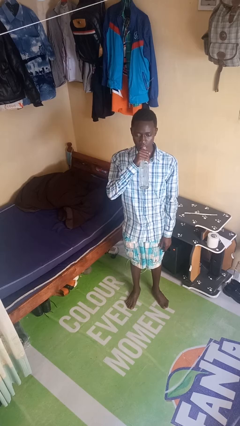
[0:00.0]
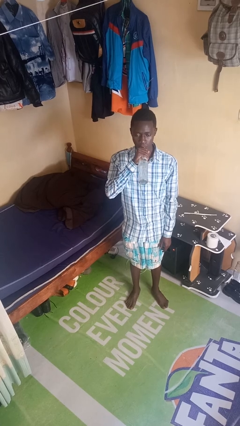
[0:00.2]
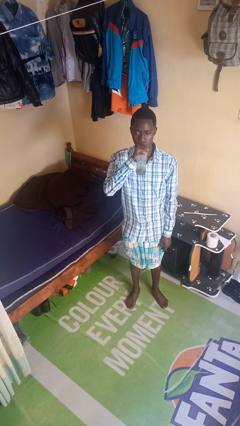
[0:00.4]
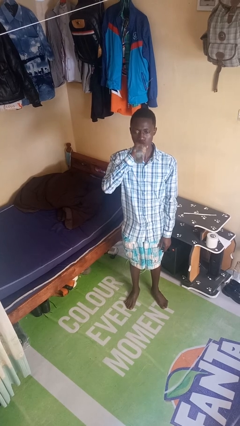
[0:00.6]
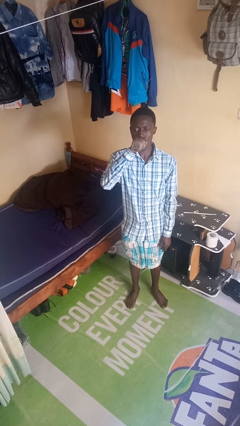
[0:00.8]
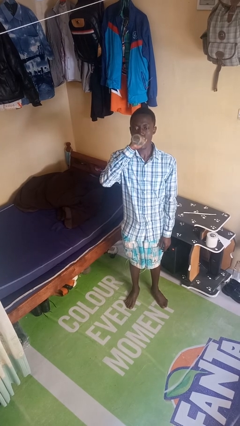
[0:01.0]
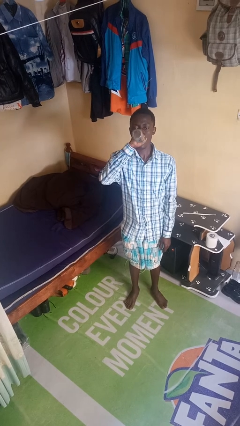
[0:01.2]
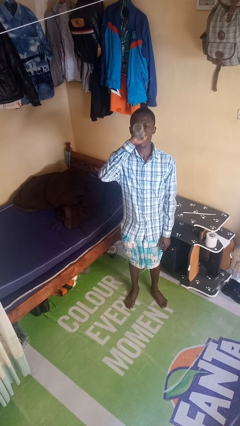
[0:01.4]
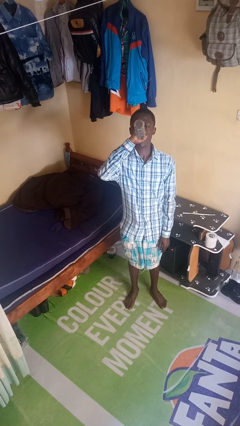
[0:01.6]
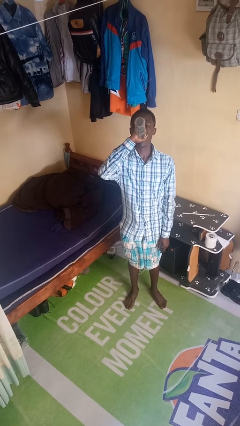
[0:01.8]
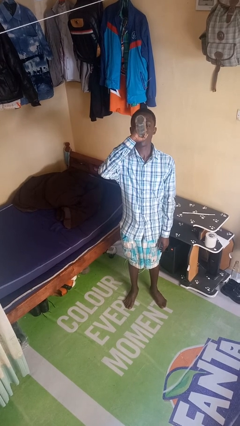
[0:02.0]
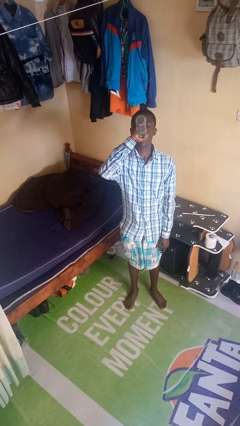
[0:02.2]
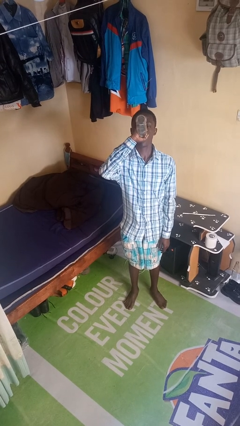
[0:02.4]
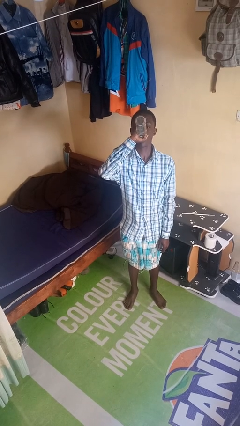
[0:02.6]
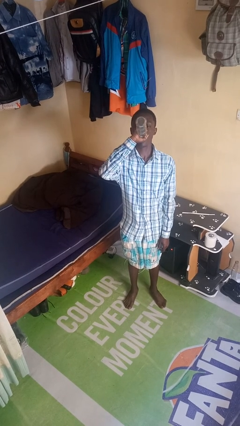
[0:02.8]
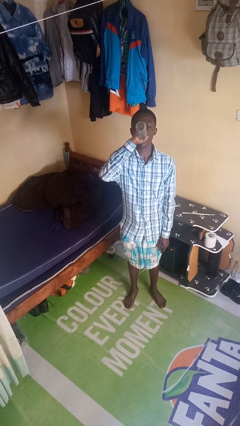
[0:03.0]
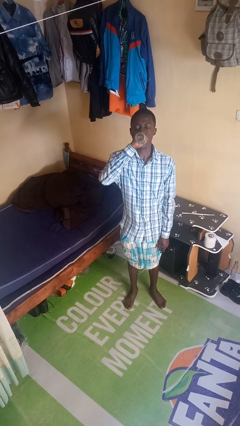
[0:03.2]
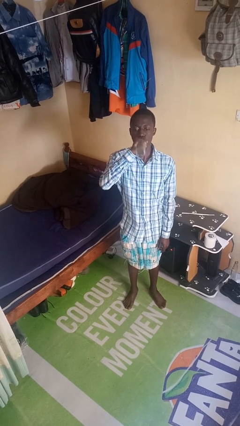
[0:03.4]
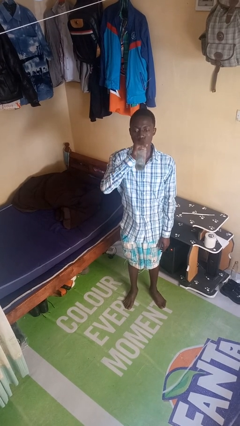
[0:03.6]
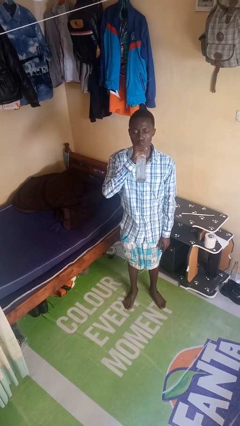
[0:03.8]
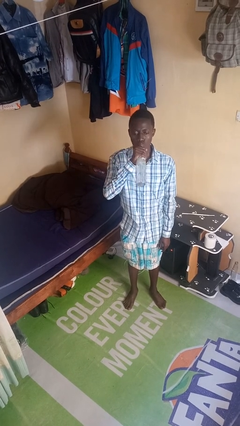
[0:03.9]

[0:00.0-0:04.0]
person drinks from bottle

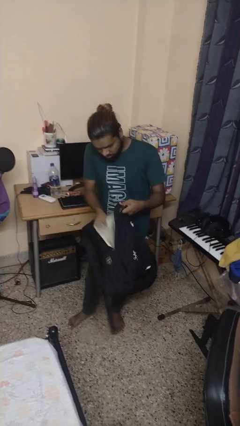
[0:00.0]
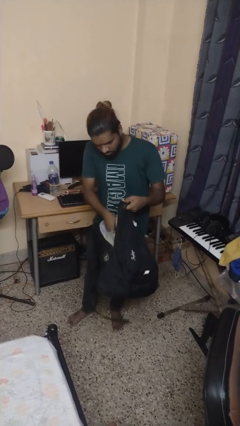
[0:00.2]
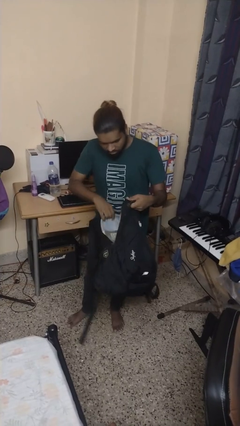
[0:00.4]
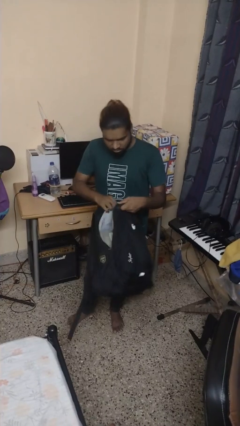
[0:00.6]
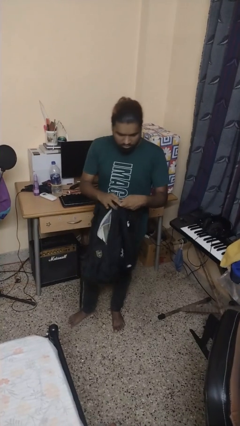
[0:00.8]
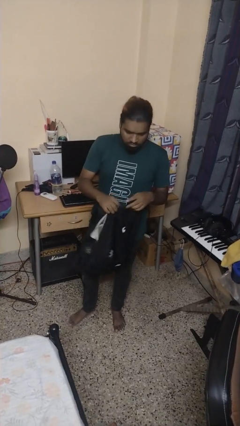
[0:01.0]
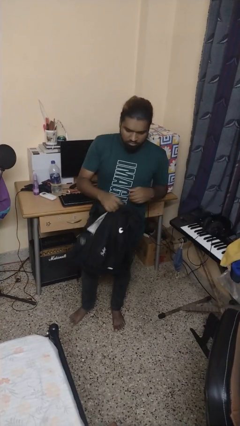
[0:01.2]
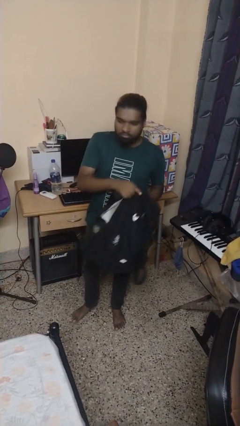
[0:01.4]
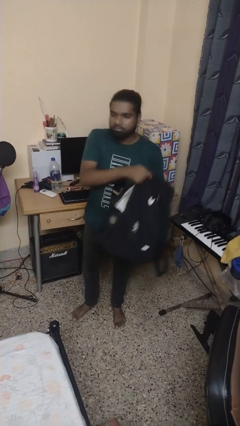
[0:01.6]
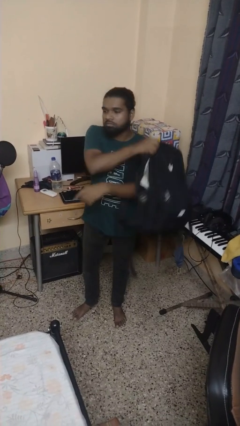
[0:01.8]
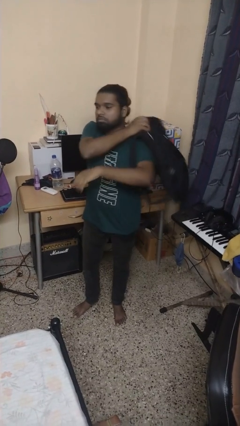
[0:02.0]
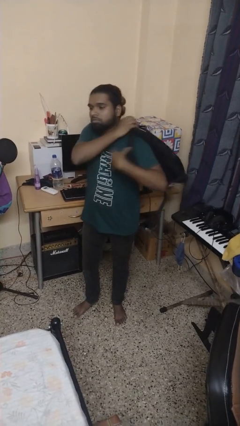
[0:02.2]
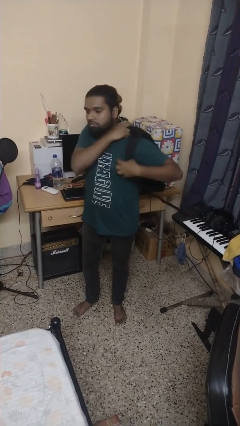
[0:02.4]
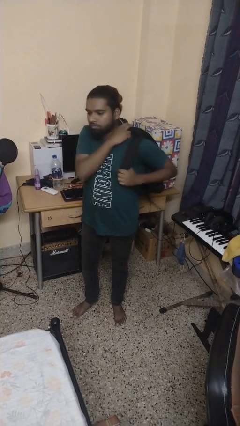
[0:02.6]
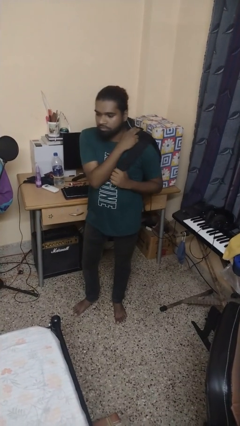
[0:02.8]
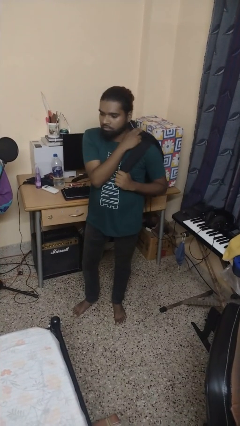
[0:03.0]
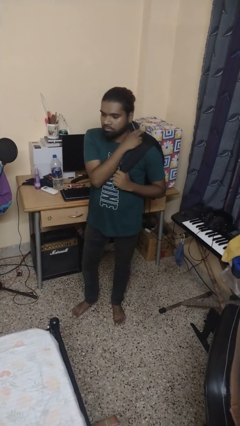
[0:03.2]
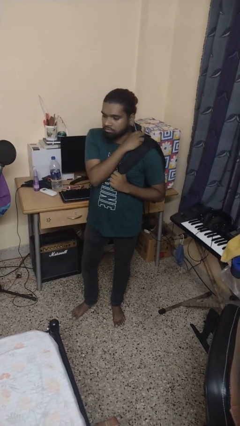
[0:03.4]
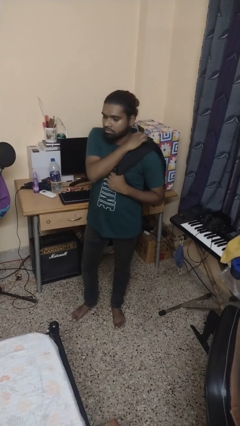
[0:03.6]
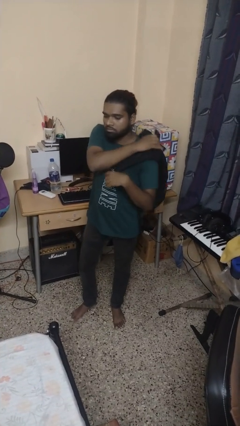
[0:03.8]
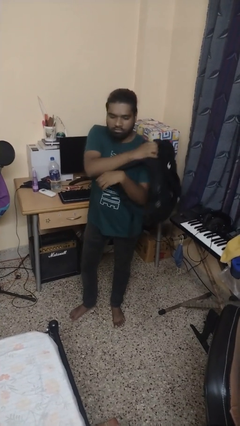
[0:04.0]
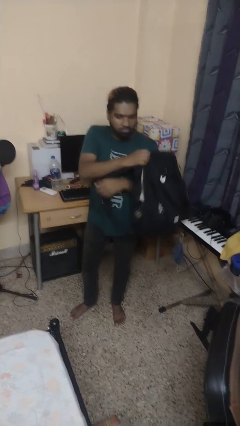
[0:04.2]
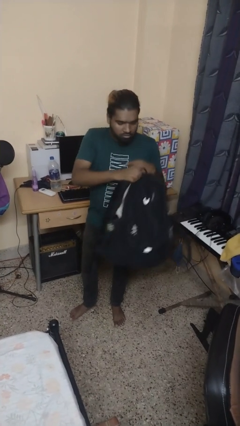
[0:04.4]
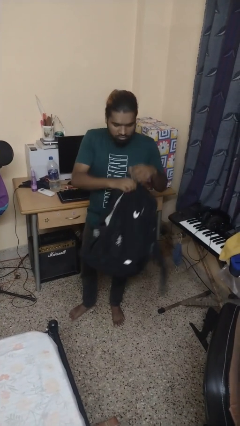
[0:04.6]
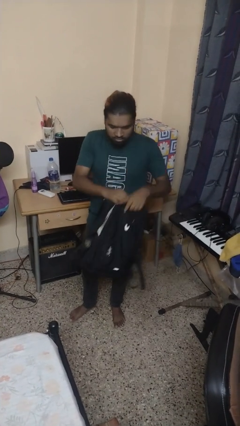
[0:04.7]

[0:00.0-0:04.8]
person puts object into backpack

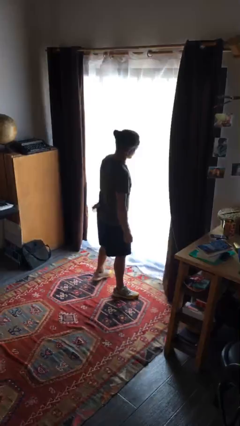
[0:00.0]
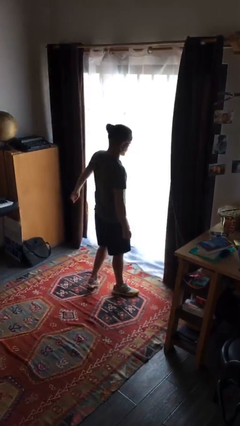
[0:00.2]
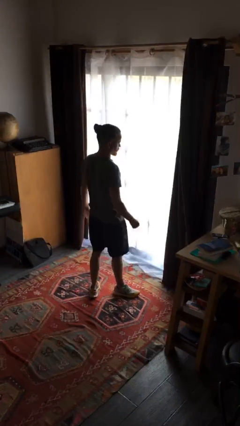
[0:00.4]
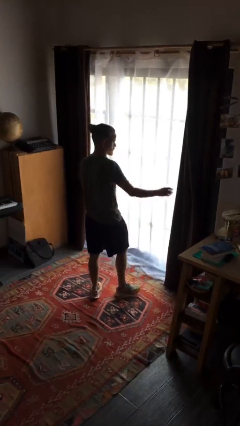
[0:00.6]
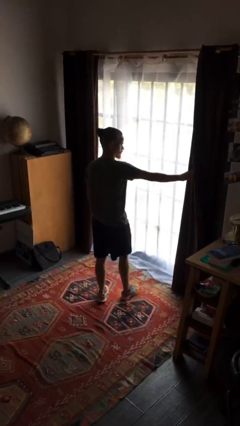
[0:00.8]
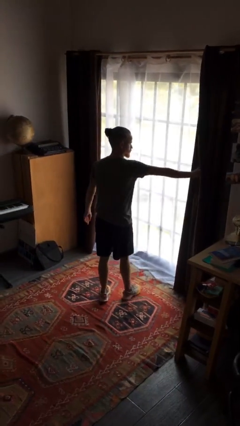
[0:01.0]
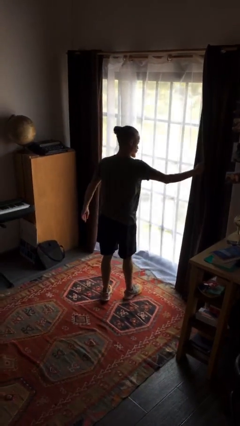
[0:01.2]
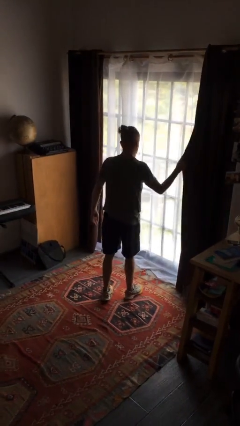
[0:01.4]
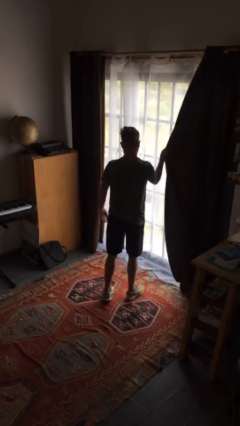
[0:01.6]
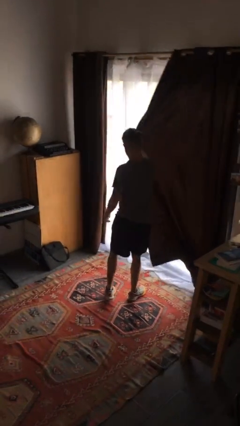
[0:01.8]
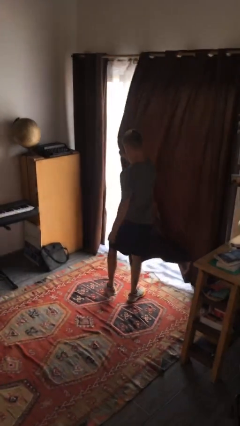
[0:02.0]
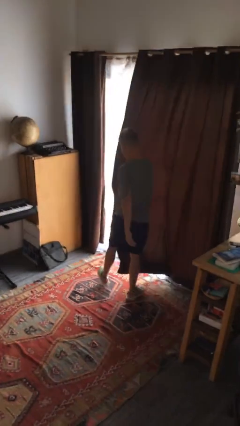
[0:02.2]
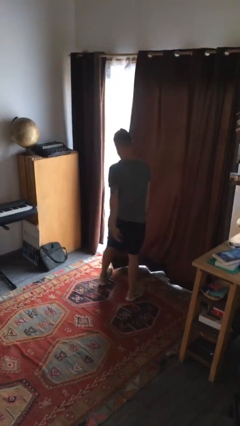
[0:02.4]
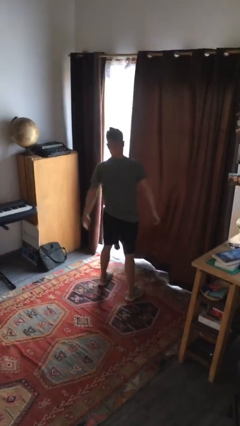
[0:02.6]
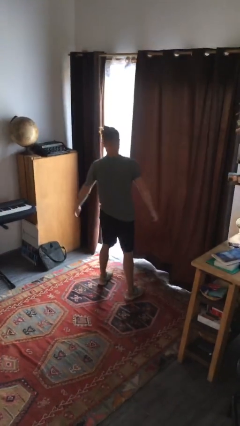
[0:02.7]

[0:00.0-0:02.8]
person closes curtains

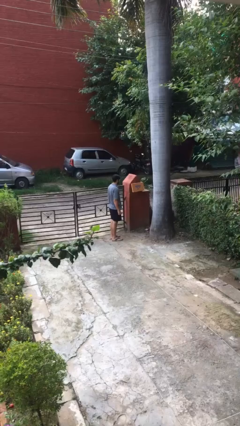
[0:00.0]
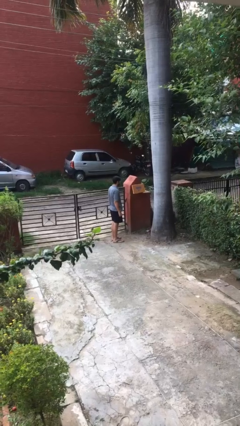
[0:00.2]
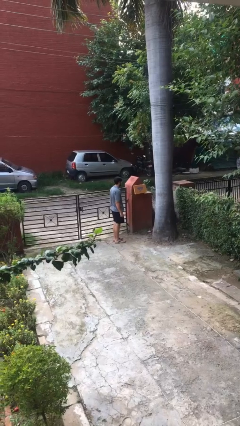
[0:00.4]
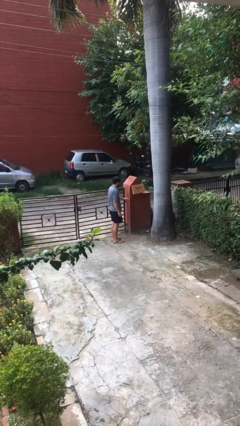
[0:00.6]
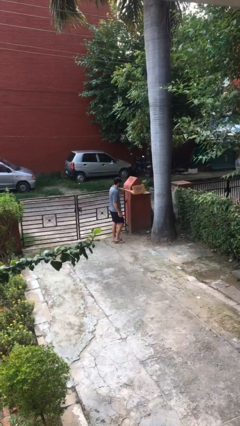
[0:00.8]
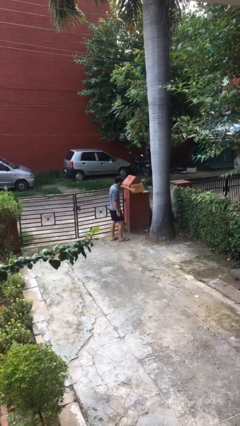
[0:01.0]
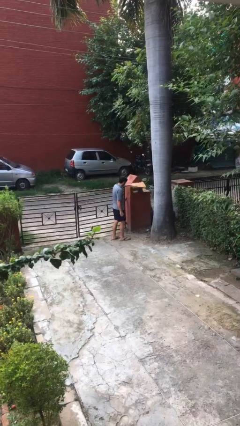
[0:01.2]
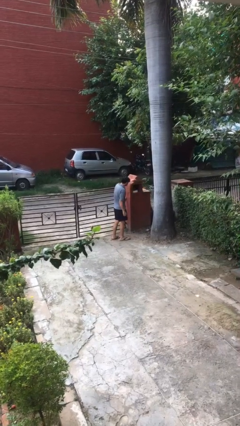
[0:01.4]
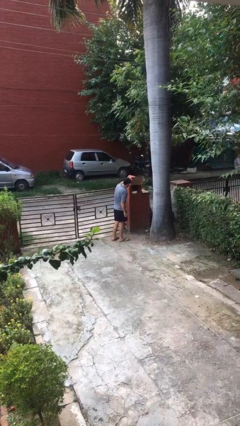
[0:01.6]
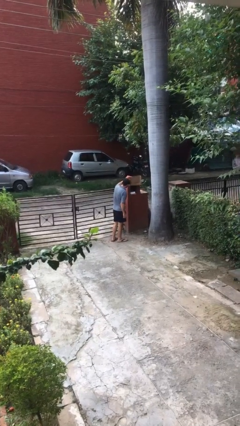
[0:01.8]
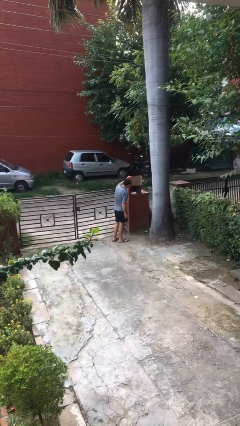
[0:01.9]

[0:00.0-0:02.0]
person opens mailbox

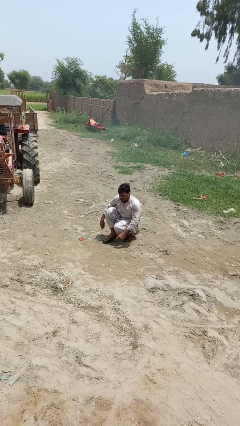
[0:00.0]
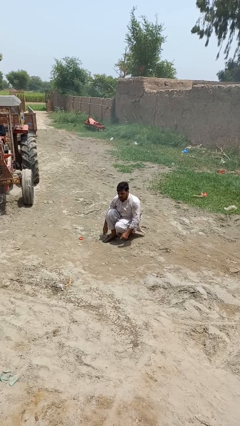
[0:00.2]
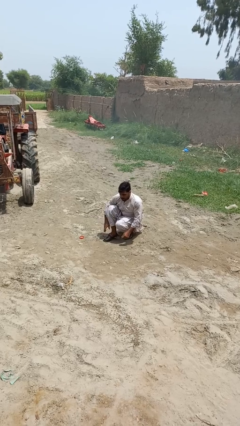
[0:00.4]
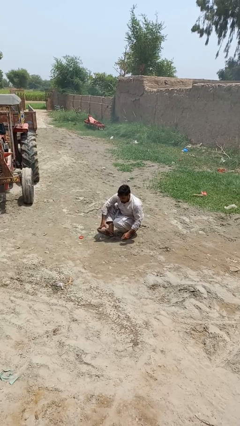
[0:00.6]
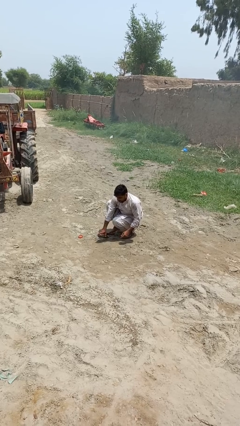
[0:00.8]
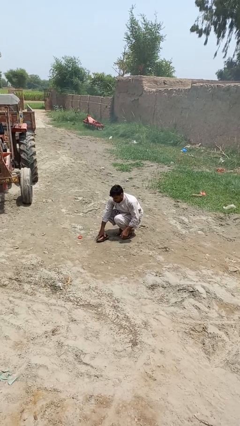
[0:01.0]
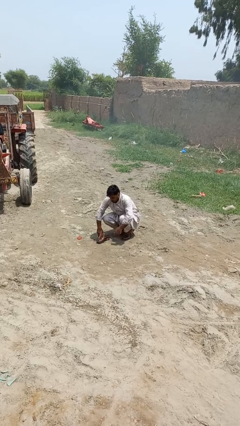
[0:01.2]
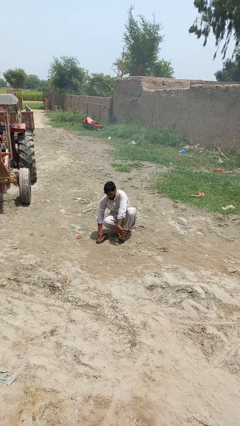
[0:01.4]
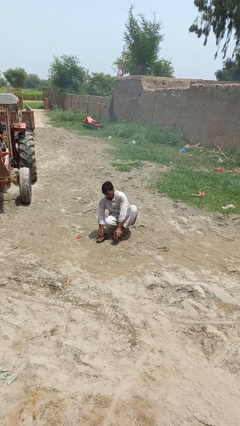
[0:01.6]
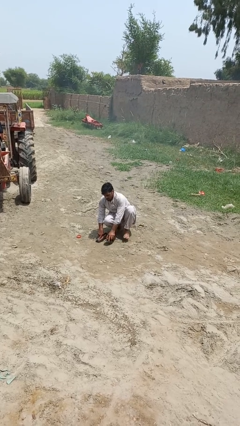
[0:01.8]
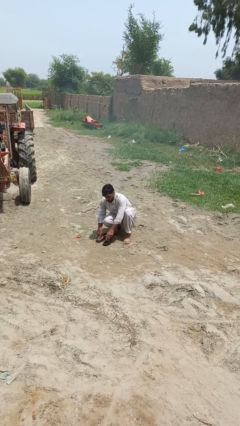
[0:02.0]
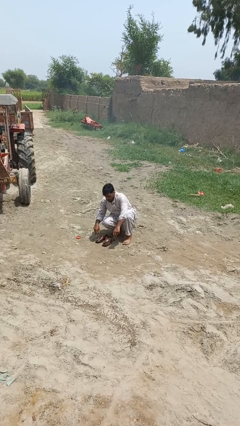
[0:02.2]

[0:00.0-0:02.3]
person takes off shoes

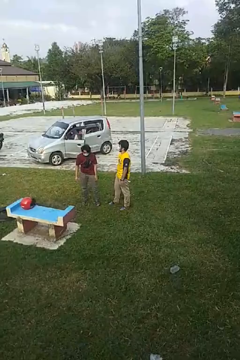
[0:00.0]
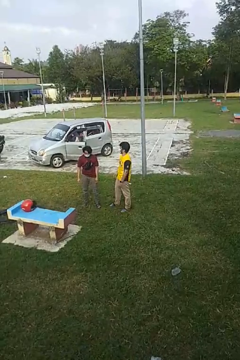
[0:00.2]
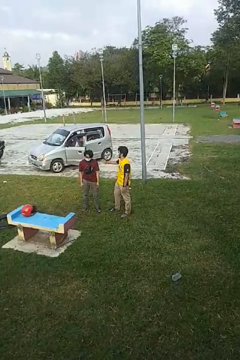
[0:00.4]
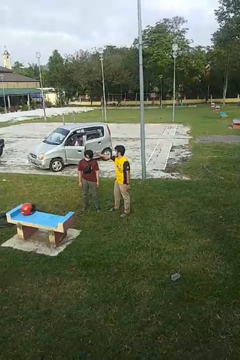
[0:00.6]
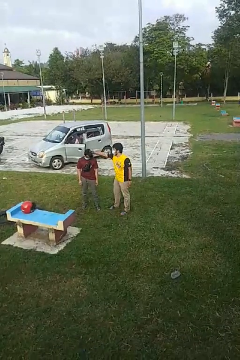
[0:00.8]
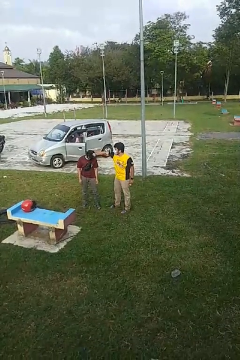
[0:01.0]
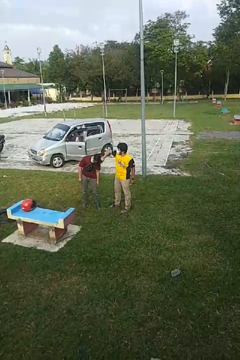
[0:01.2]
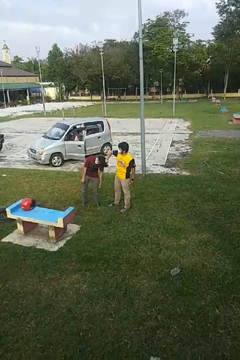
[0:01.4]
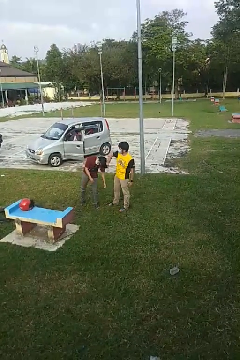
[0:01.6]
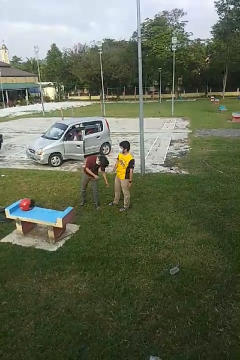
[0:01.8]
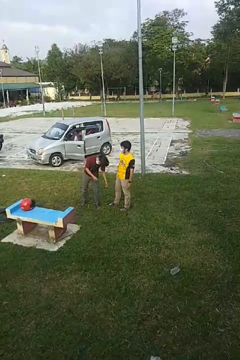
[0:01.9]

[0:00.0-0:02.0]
person grabs person by hair

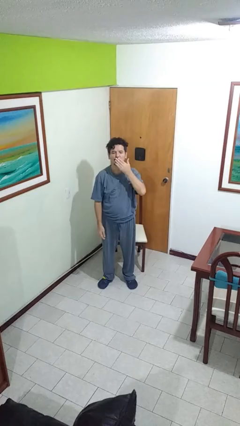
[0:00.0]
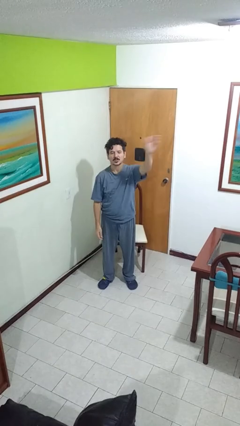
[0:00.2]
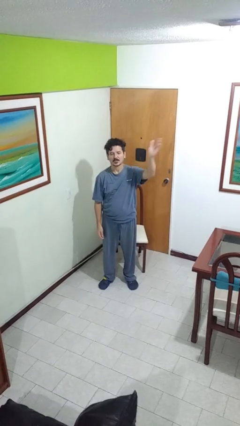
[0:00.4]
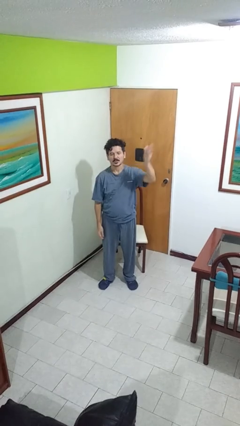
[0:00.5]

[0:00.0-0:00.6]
person gestures blow kiss
